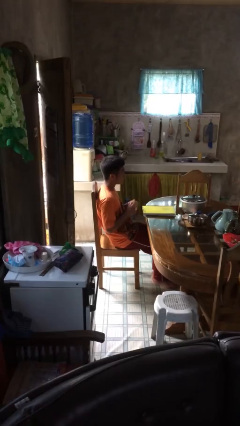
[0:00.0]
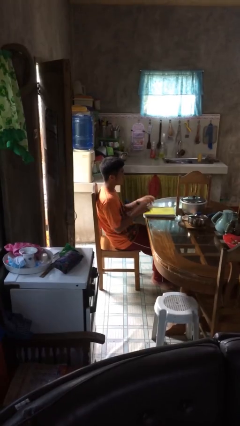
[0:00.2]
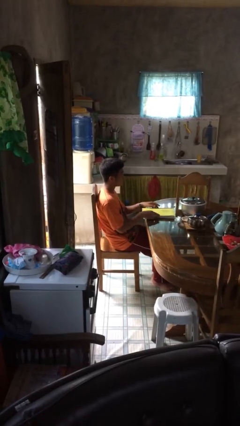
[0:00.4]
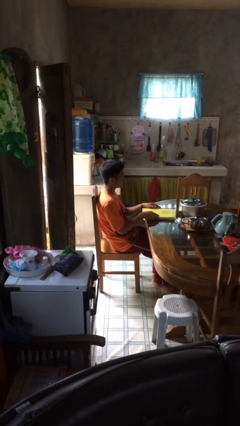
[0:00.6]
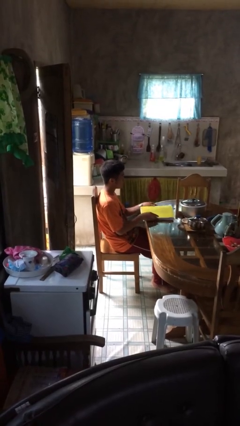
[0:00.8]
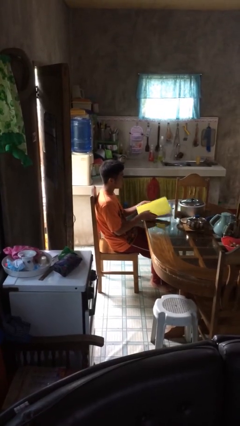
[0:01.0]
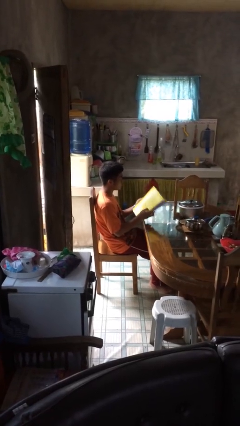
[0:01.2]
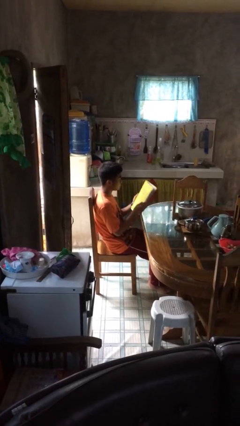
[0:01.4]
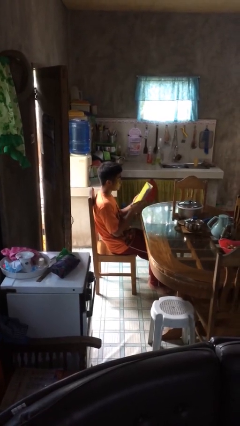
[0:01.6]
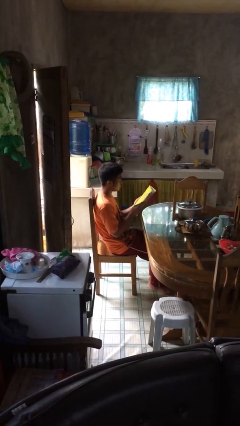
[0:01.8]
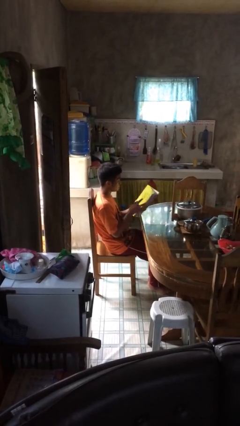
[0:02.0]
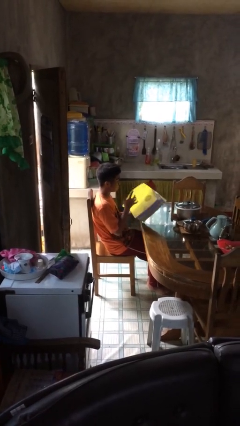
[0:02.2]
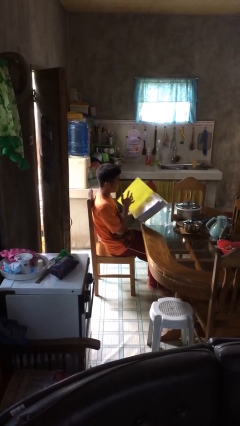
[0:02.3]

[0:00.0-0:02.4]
person picks up object from table

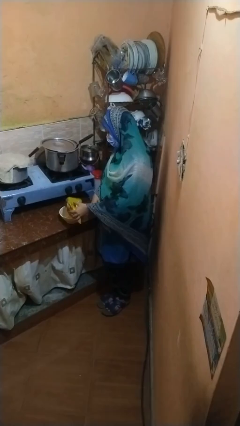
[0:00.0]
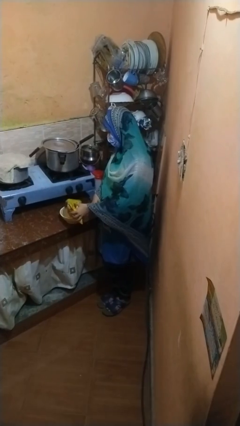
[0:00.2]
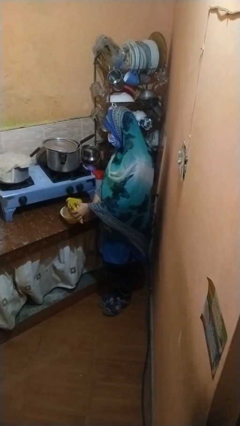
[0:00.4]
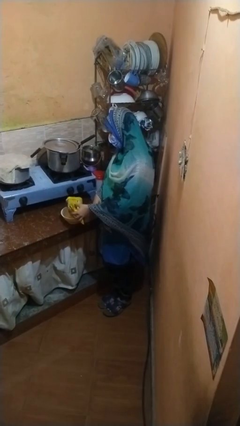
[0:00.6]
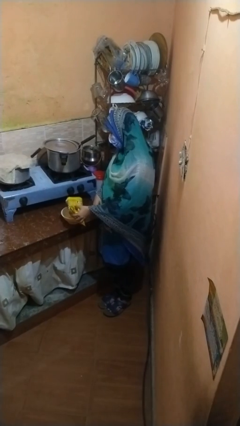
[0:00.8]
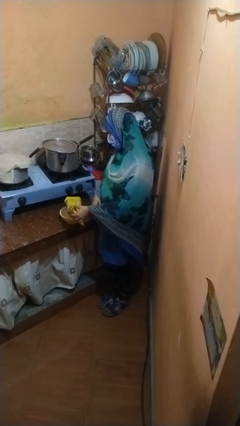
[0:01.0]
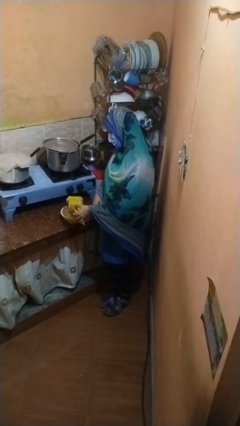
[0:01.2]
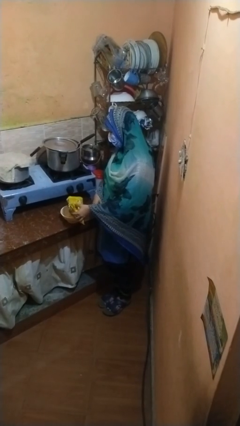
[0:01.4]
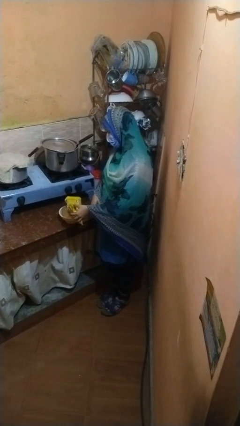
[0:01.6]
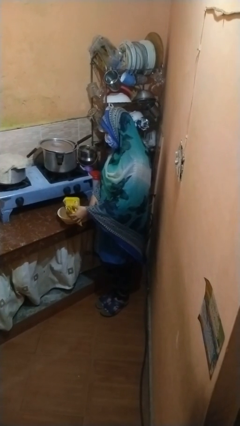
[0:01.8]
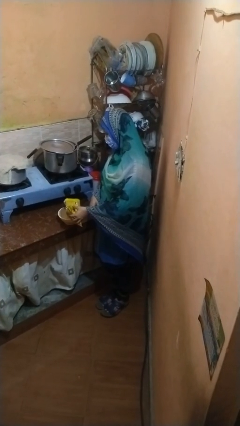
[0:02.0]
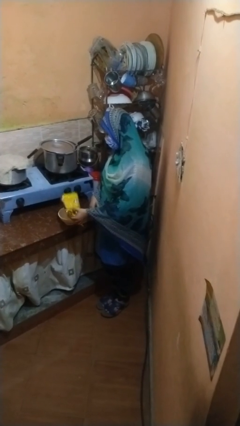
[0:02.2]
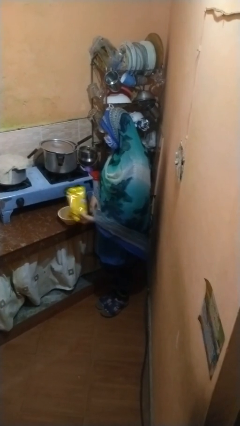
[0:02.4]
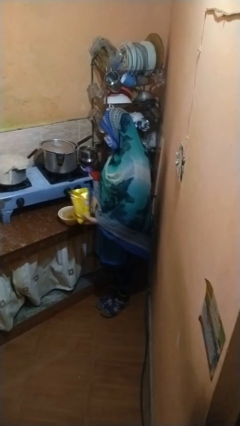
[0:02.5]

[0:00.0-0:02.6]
person pours into bowl

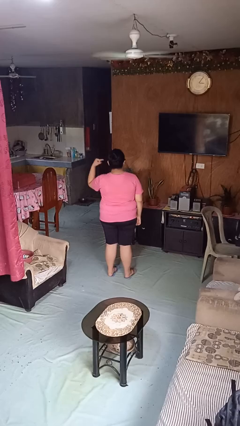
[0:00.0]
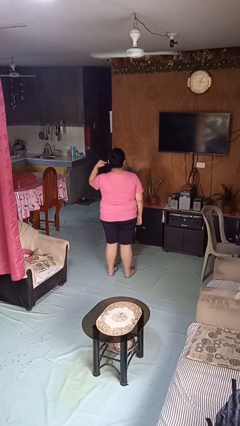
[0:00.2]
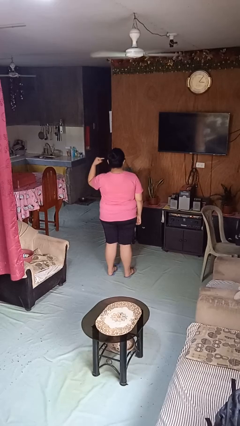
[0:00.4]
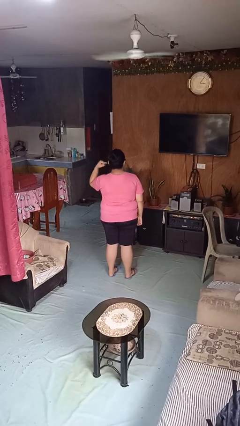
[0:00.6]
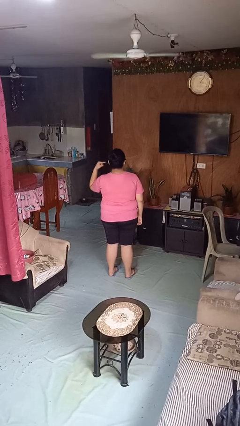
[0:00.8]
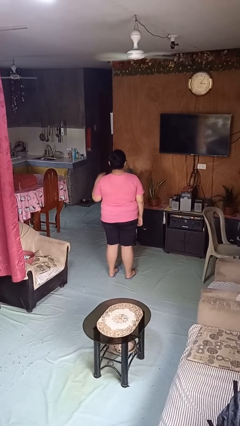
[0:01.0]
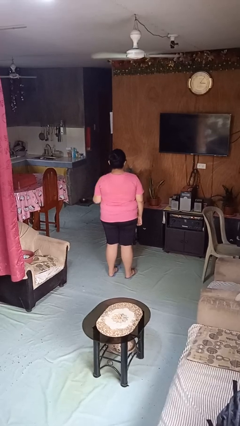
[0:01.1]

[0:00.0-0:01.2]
person gestures listen closely

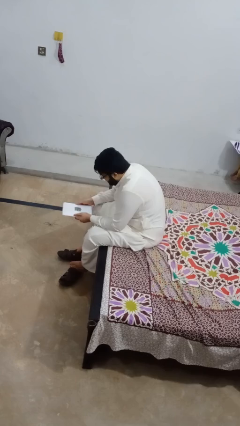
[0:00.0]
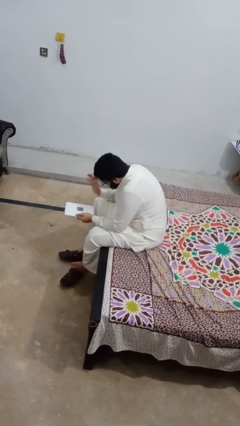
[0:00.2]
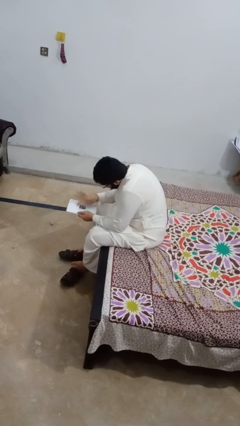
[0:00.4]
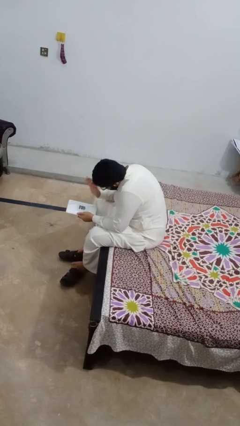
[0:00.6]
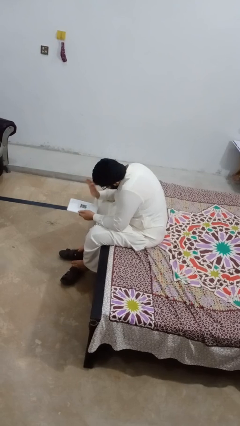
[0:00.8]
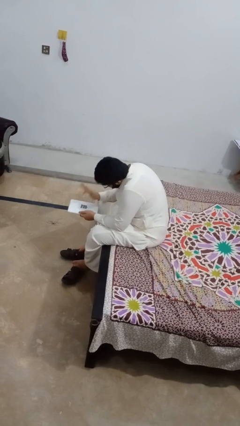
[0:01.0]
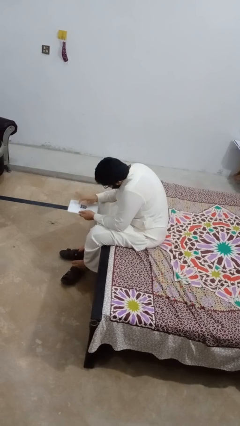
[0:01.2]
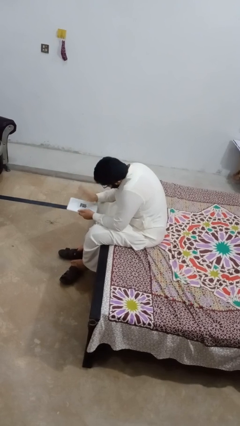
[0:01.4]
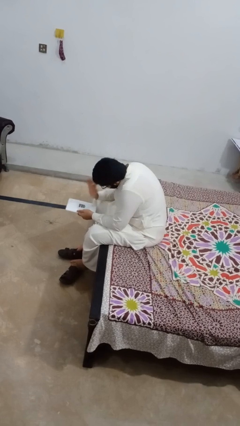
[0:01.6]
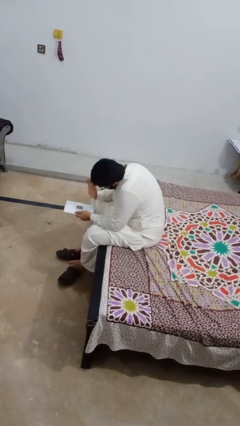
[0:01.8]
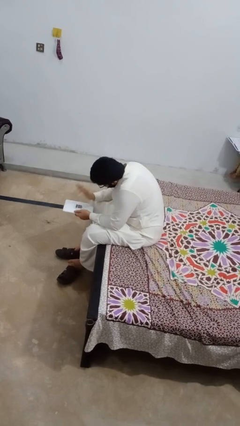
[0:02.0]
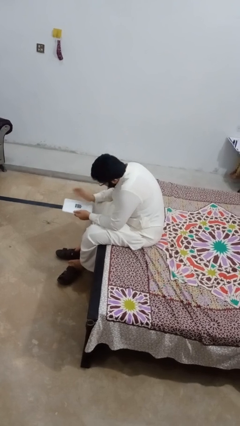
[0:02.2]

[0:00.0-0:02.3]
person taps object with finger

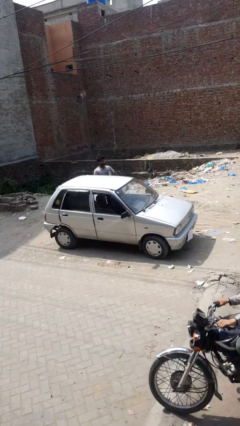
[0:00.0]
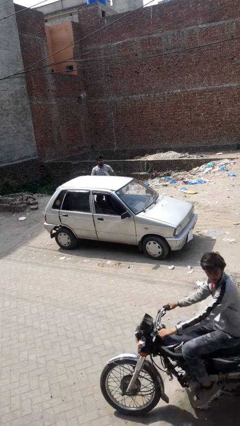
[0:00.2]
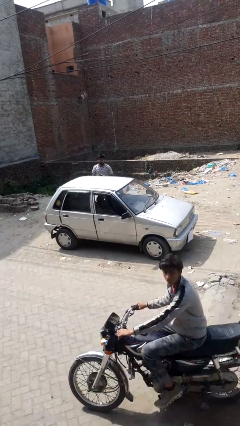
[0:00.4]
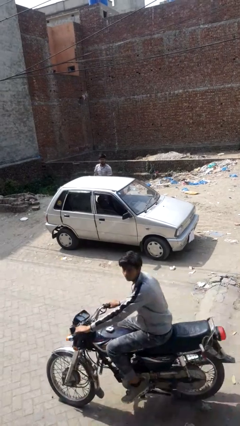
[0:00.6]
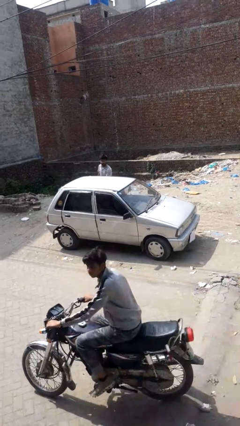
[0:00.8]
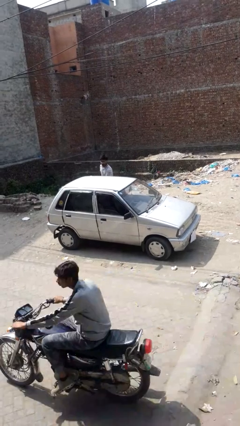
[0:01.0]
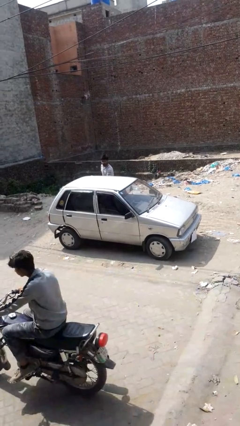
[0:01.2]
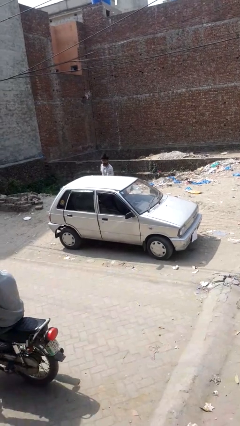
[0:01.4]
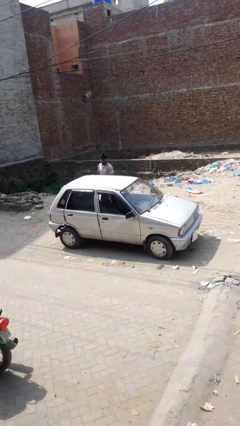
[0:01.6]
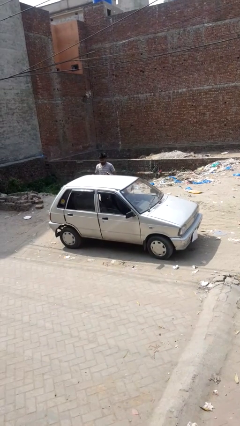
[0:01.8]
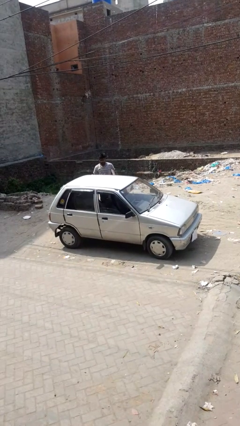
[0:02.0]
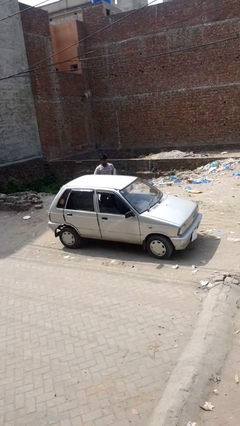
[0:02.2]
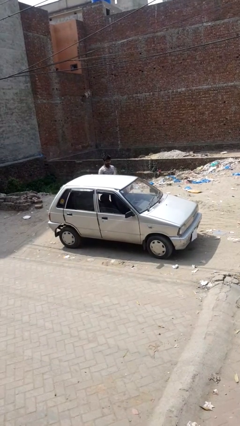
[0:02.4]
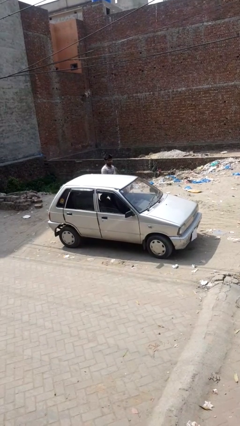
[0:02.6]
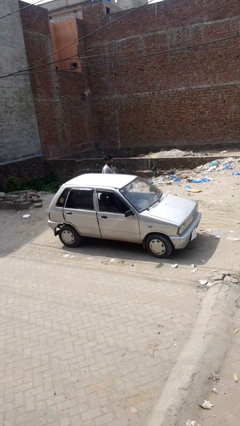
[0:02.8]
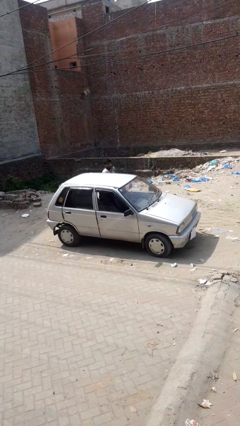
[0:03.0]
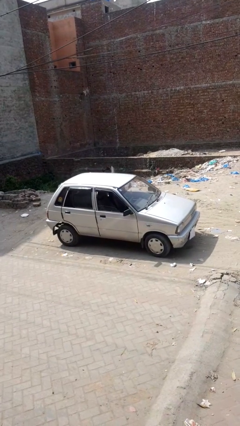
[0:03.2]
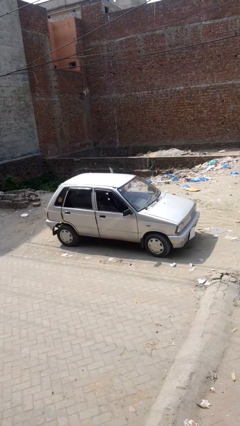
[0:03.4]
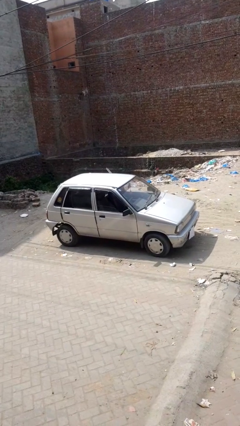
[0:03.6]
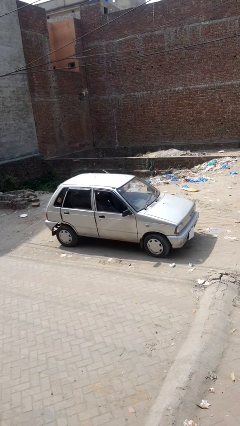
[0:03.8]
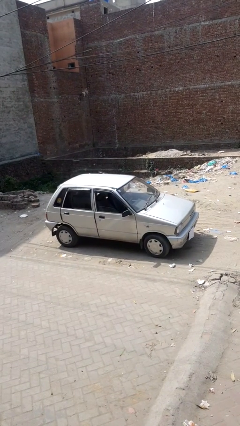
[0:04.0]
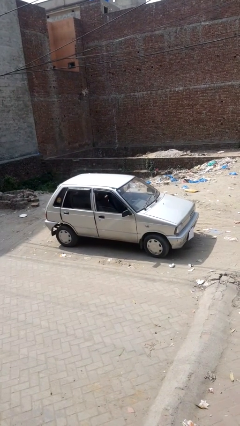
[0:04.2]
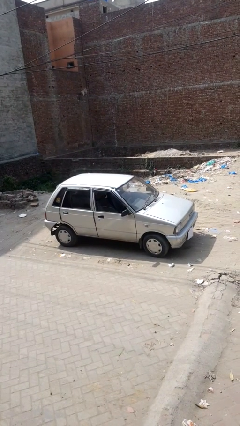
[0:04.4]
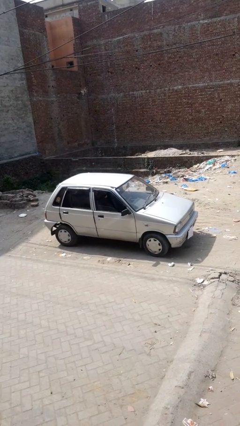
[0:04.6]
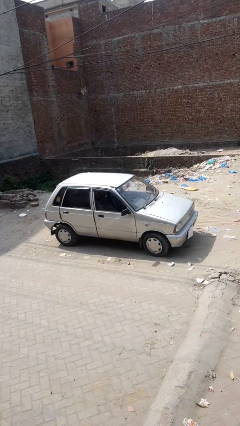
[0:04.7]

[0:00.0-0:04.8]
car picks up person

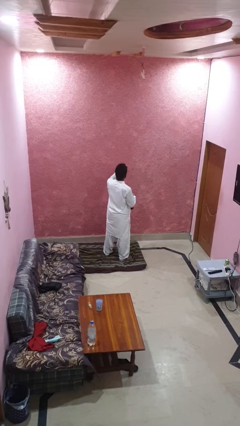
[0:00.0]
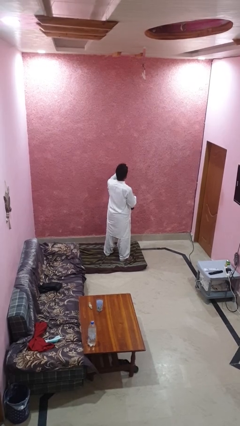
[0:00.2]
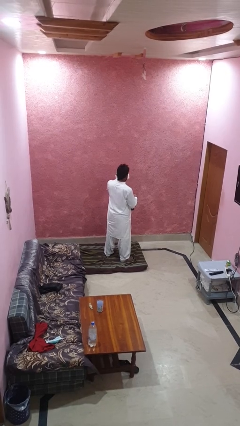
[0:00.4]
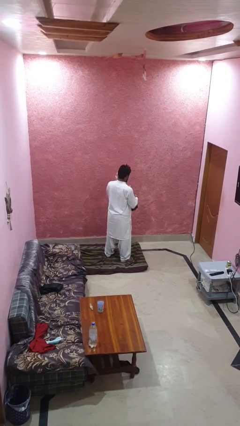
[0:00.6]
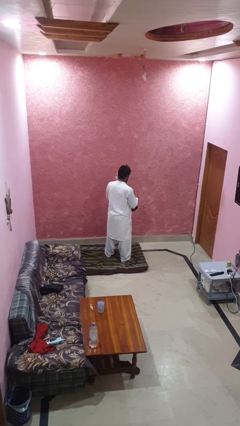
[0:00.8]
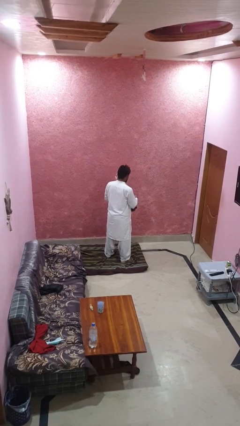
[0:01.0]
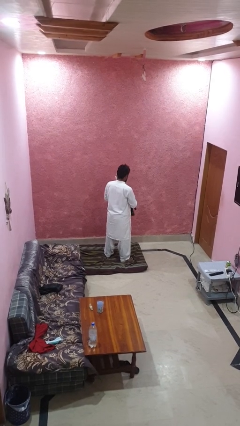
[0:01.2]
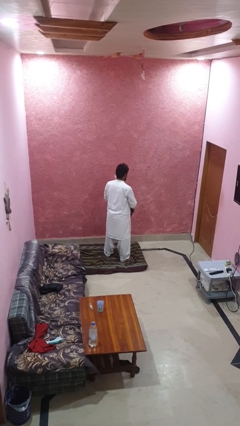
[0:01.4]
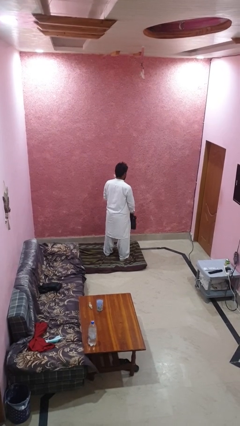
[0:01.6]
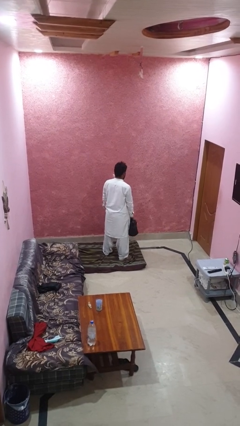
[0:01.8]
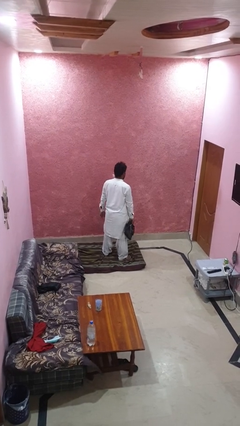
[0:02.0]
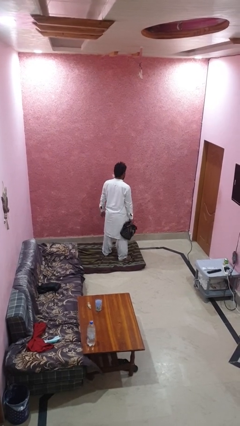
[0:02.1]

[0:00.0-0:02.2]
person puts object into purse

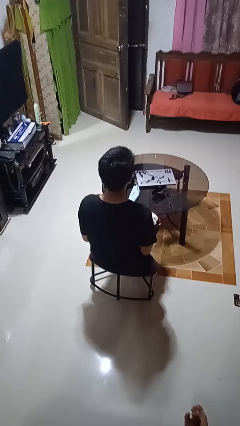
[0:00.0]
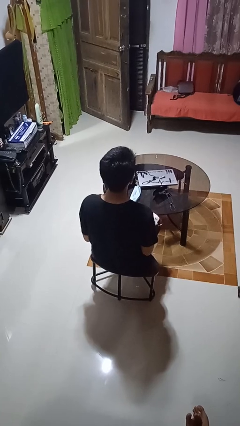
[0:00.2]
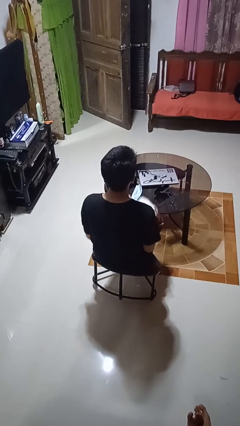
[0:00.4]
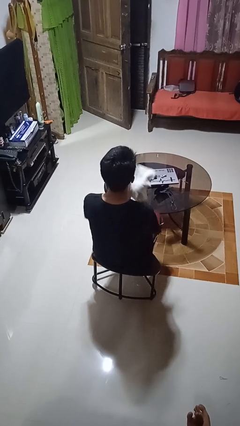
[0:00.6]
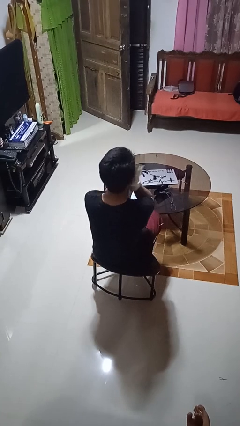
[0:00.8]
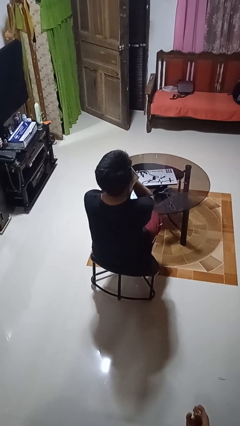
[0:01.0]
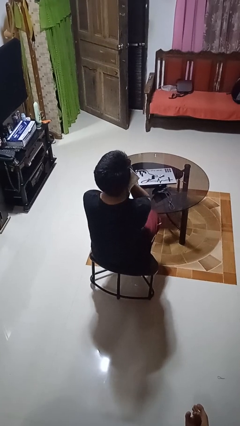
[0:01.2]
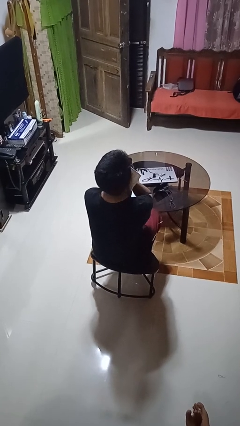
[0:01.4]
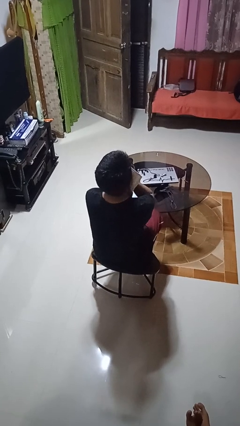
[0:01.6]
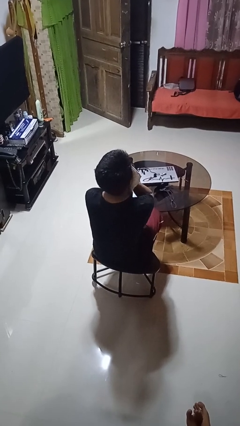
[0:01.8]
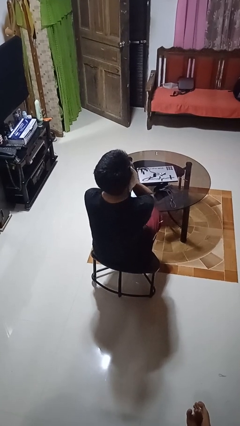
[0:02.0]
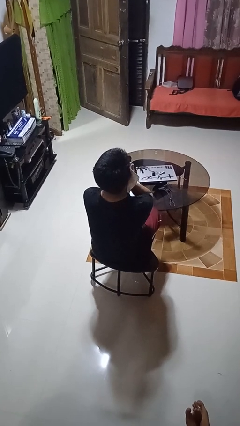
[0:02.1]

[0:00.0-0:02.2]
person wipes mouth with napkin
